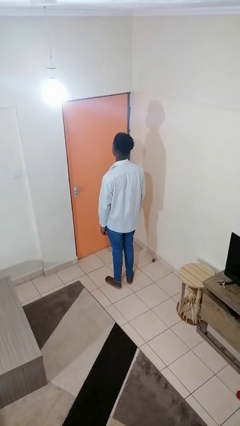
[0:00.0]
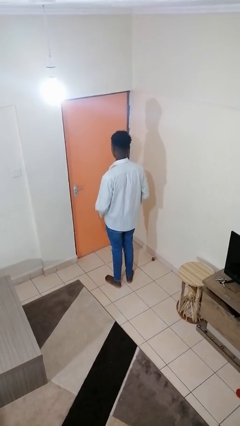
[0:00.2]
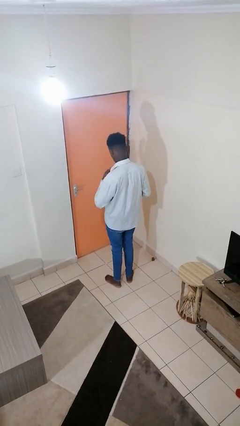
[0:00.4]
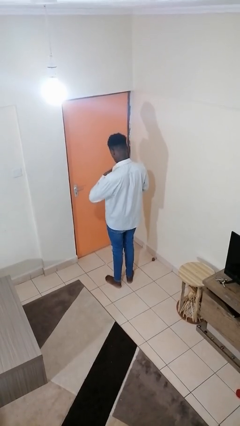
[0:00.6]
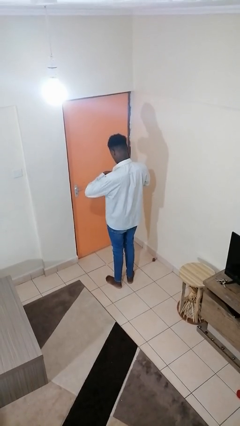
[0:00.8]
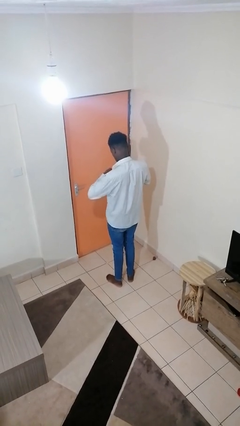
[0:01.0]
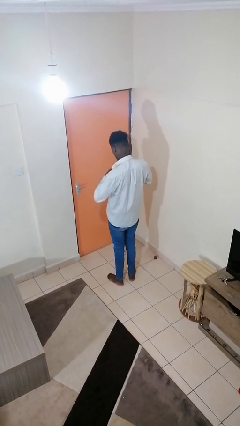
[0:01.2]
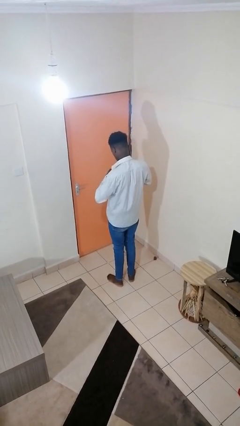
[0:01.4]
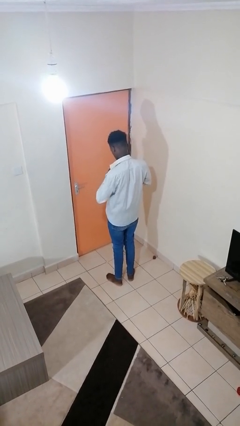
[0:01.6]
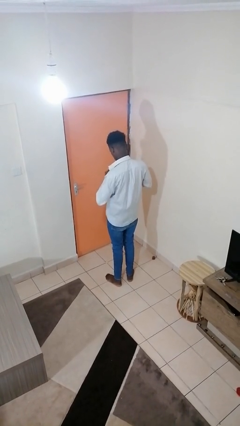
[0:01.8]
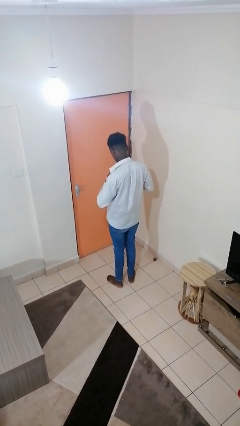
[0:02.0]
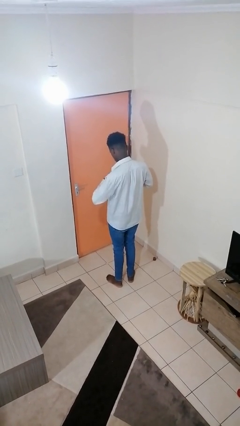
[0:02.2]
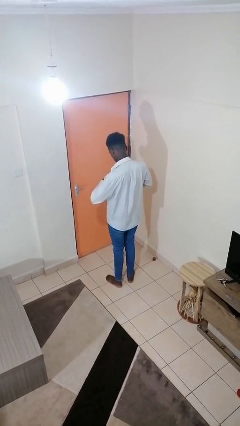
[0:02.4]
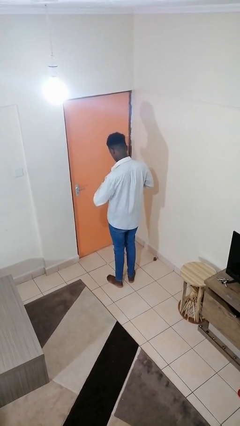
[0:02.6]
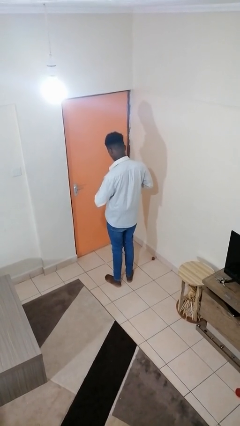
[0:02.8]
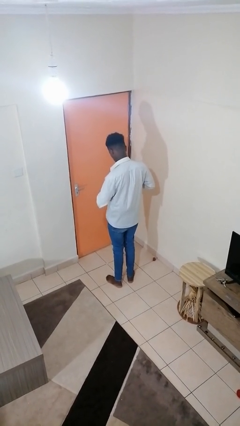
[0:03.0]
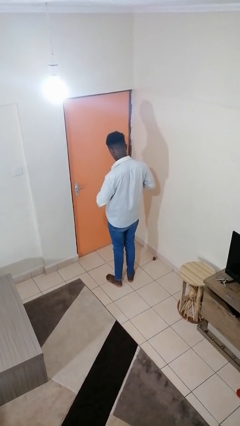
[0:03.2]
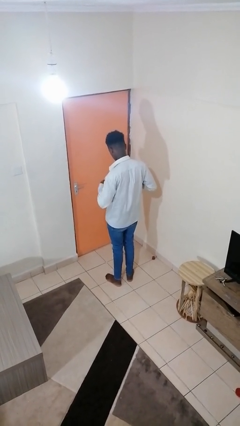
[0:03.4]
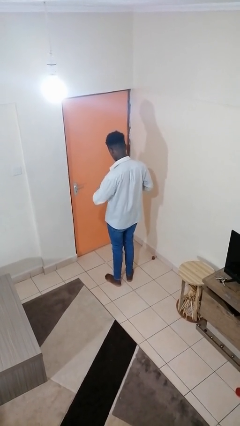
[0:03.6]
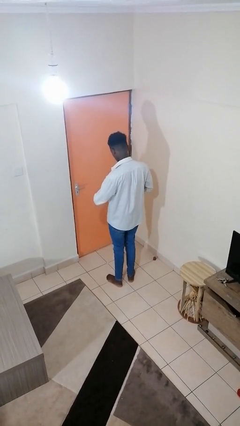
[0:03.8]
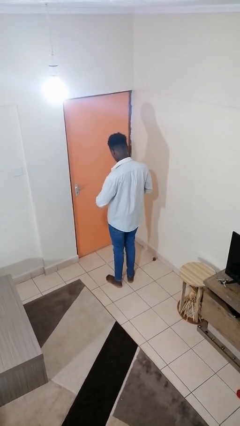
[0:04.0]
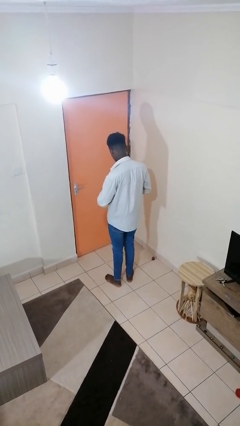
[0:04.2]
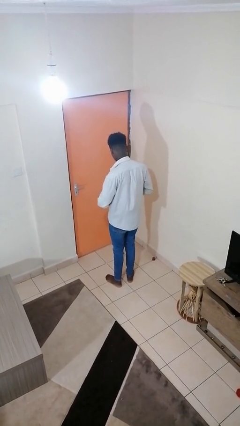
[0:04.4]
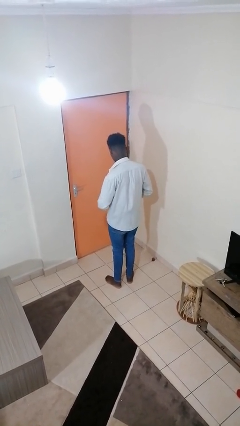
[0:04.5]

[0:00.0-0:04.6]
person unbuttons shirt

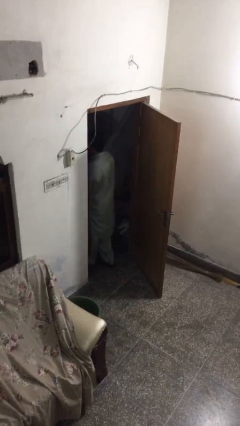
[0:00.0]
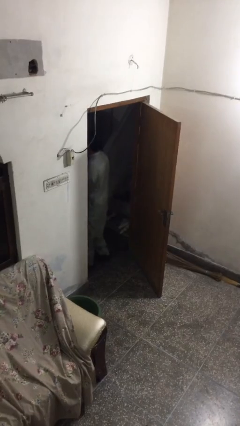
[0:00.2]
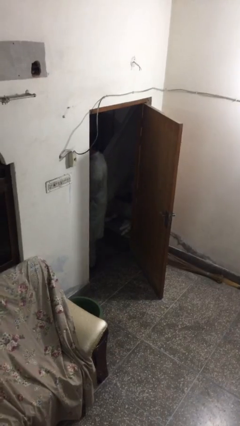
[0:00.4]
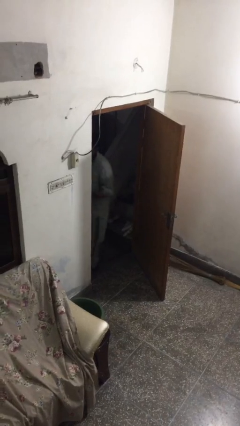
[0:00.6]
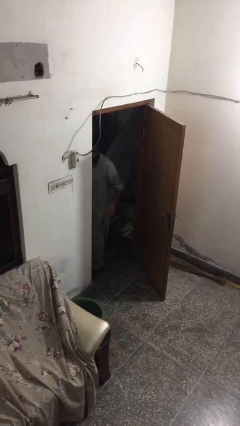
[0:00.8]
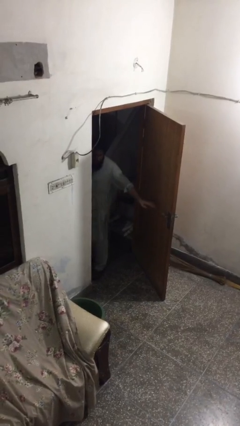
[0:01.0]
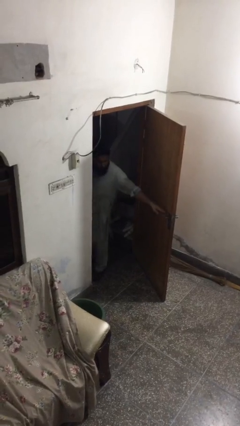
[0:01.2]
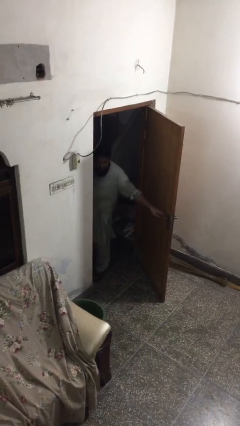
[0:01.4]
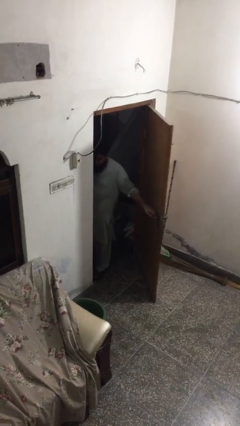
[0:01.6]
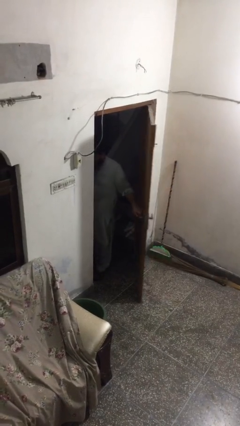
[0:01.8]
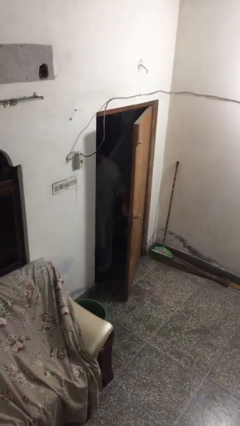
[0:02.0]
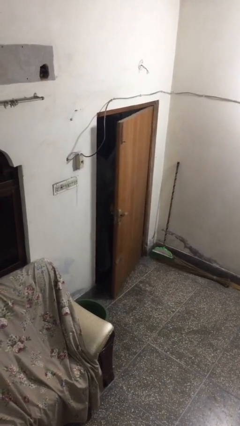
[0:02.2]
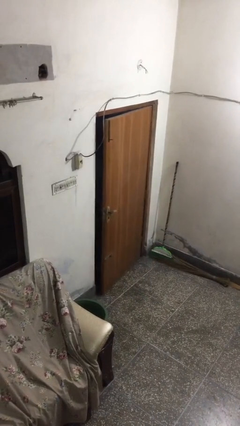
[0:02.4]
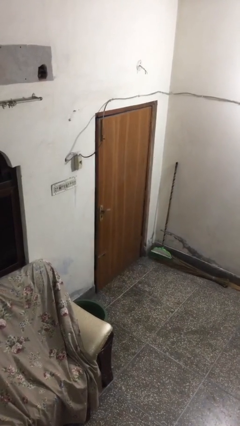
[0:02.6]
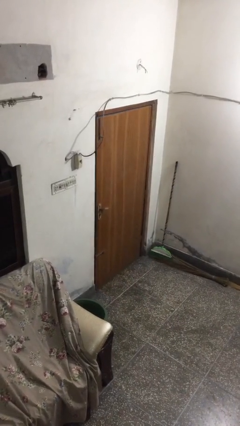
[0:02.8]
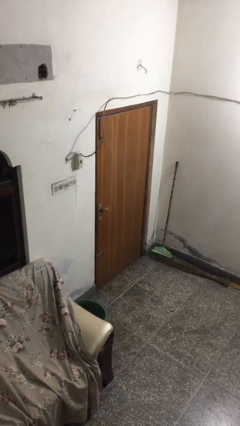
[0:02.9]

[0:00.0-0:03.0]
person closes facility door

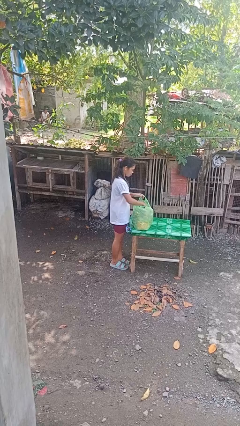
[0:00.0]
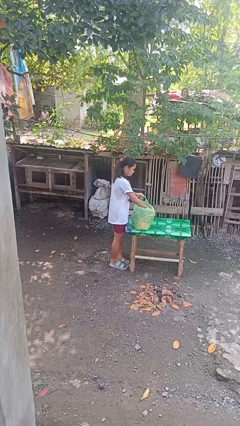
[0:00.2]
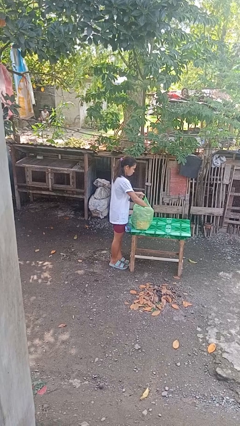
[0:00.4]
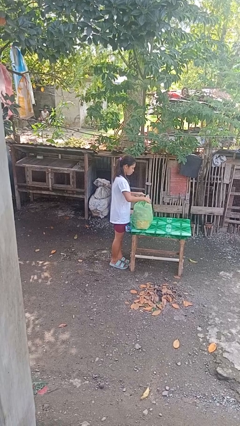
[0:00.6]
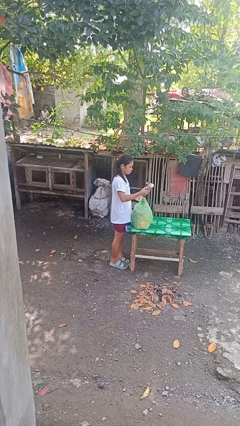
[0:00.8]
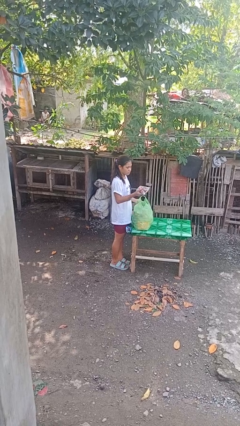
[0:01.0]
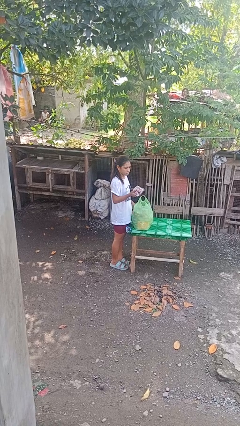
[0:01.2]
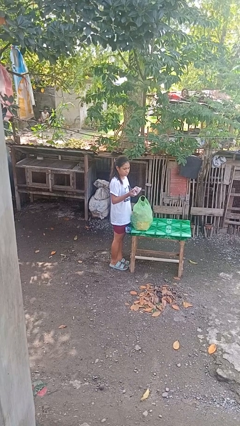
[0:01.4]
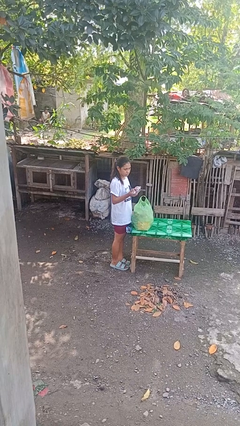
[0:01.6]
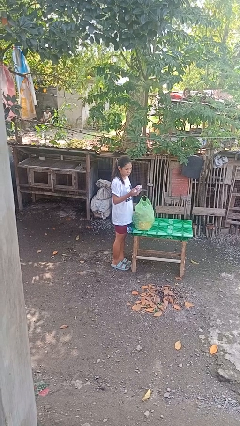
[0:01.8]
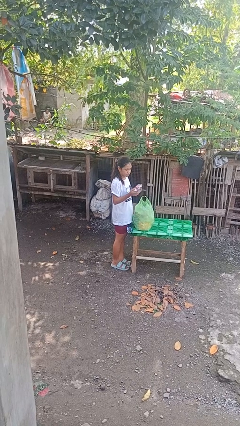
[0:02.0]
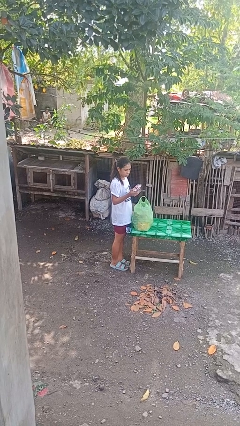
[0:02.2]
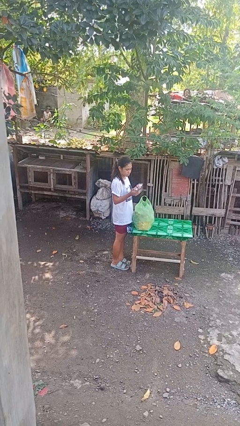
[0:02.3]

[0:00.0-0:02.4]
person takes object from bag

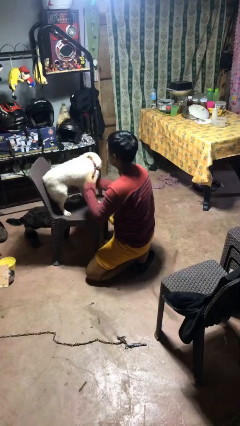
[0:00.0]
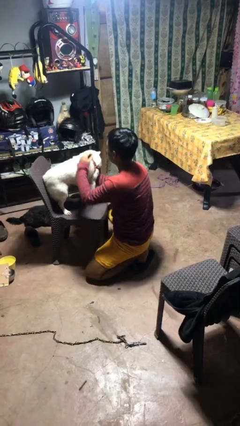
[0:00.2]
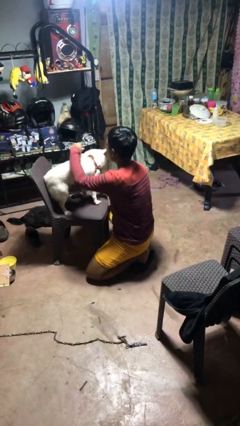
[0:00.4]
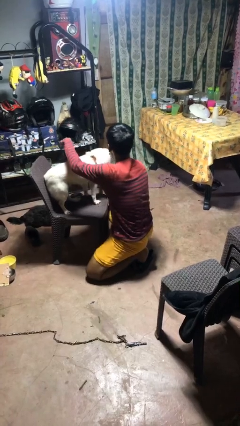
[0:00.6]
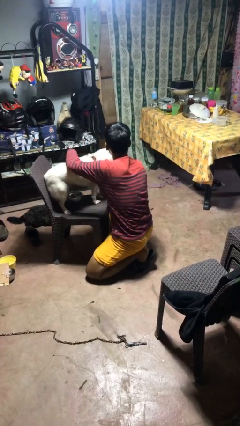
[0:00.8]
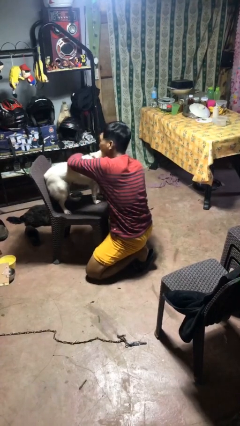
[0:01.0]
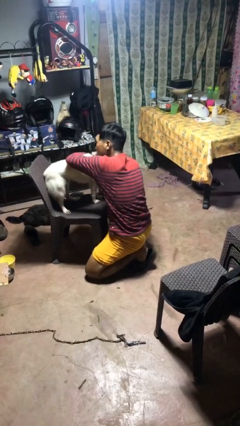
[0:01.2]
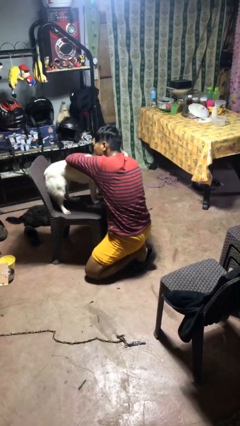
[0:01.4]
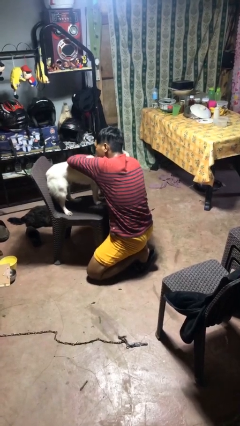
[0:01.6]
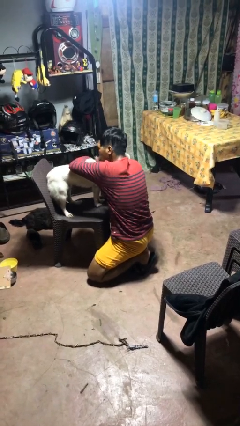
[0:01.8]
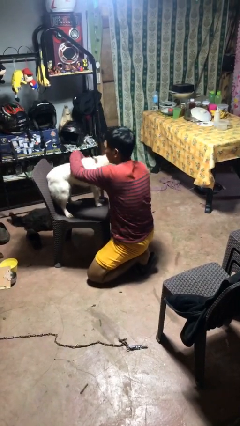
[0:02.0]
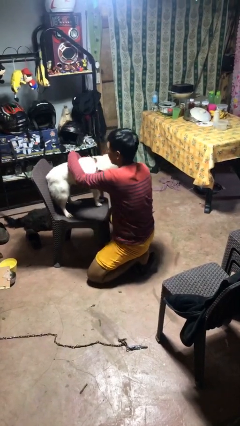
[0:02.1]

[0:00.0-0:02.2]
person hugs dog

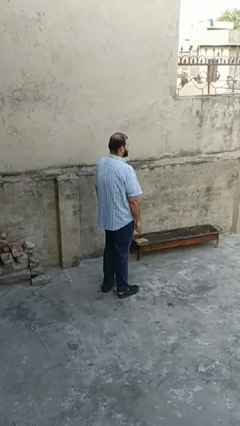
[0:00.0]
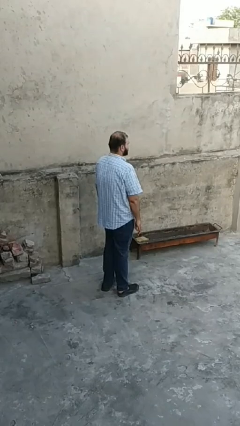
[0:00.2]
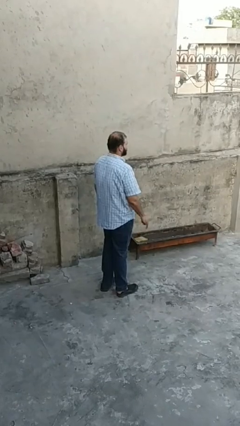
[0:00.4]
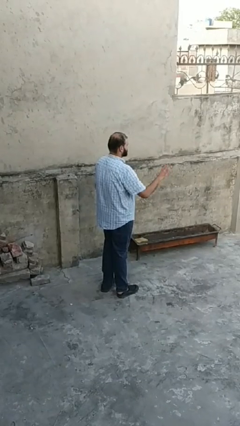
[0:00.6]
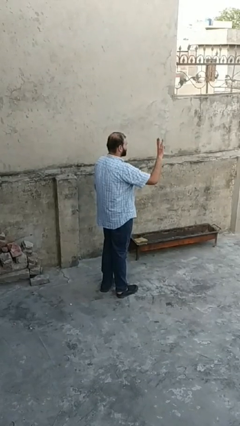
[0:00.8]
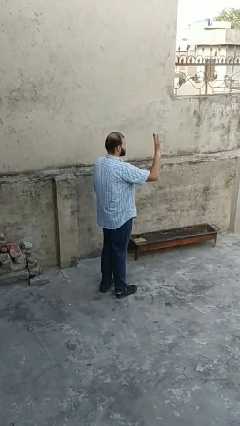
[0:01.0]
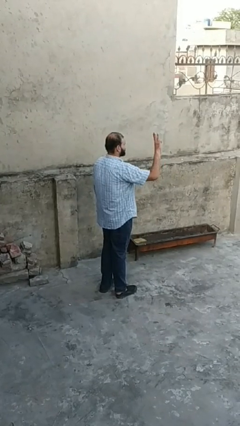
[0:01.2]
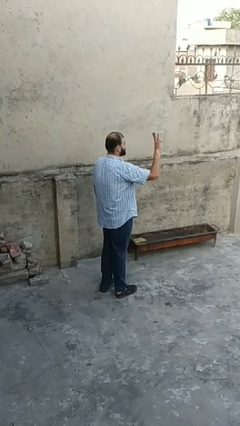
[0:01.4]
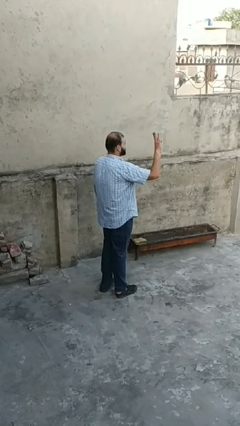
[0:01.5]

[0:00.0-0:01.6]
person gestures number three

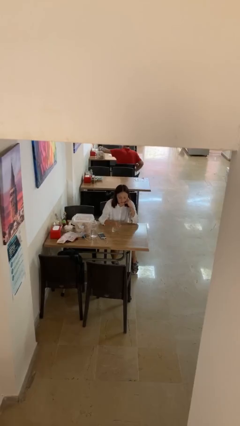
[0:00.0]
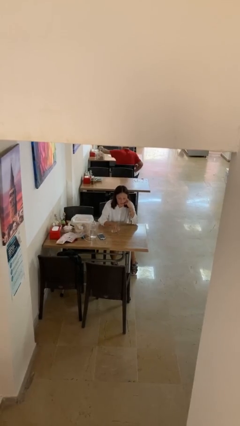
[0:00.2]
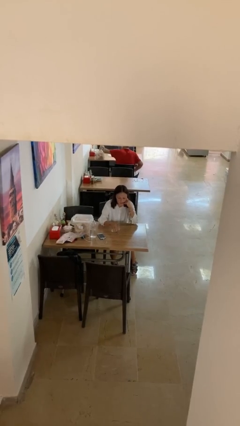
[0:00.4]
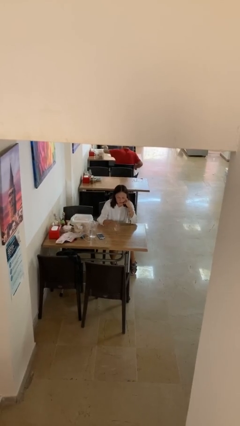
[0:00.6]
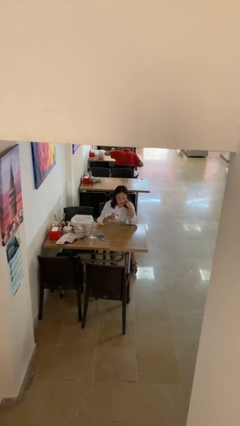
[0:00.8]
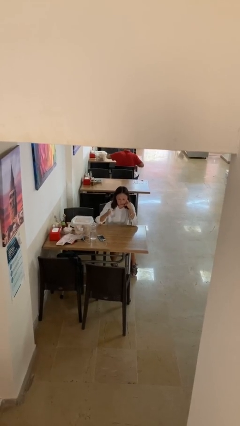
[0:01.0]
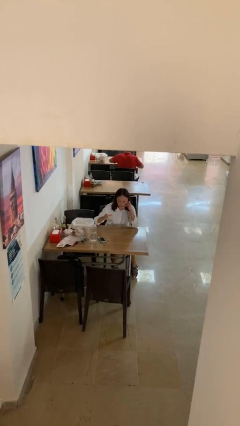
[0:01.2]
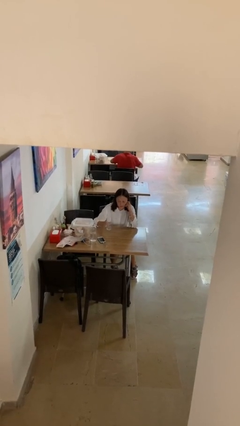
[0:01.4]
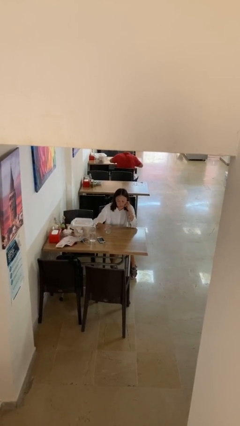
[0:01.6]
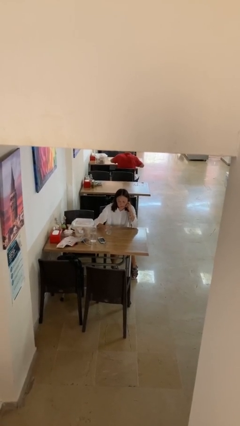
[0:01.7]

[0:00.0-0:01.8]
person sets upright glass

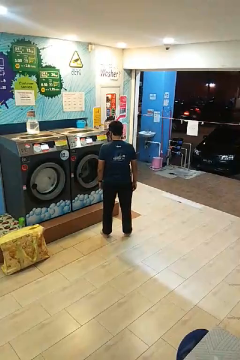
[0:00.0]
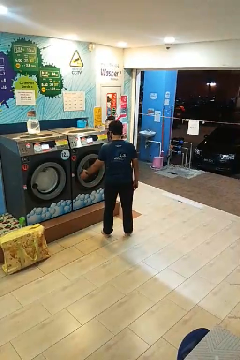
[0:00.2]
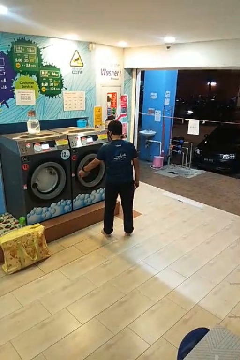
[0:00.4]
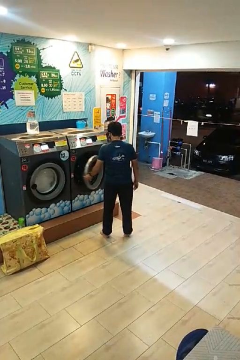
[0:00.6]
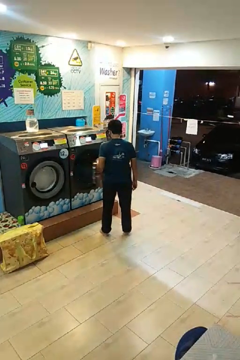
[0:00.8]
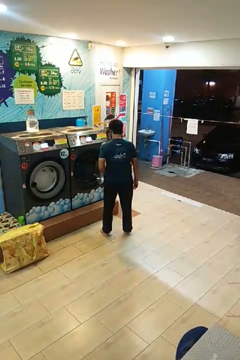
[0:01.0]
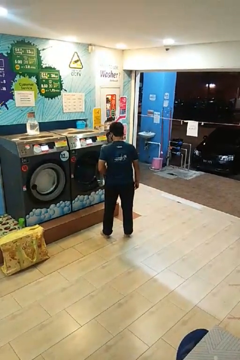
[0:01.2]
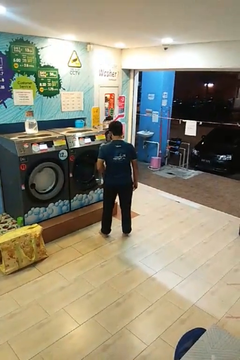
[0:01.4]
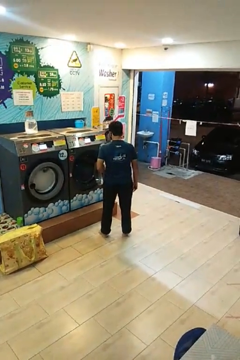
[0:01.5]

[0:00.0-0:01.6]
person opens clothes washer
